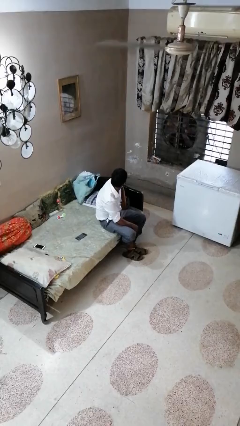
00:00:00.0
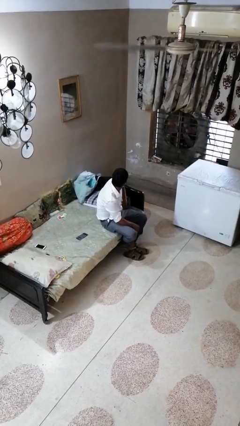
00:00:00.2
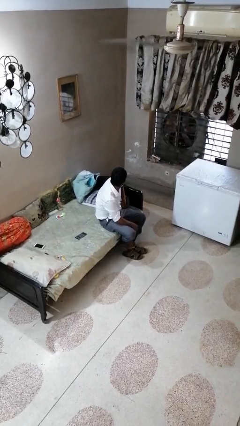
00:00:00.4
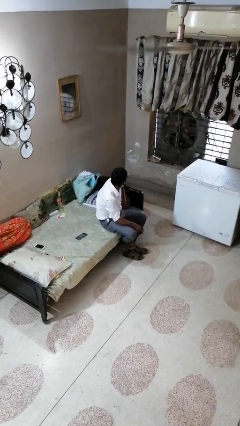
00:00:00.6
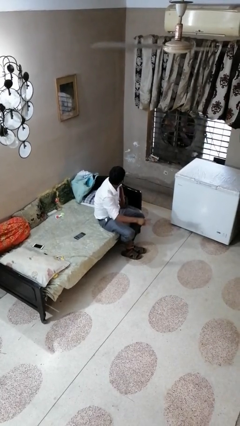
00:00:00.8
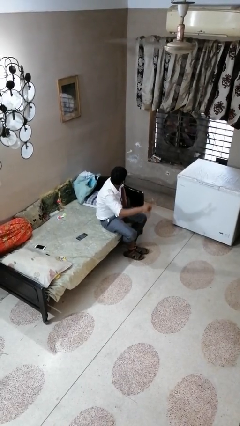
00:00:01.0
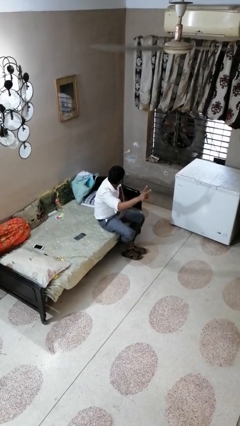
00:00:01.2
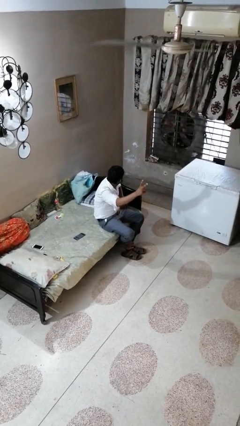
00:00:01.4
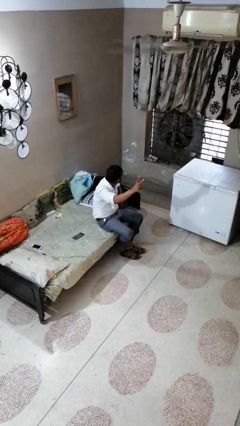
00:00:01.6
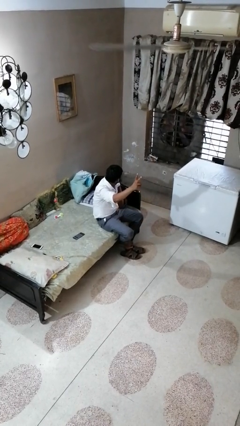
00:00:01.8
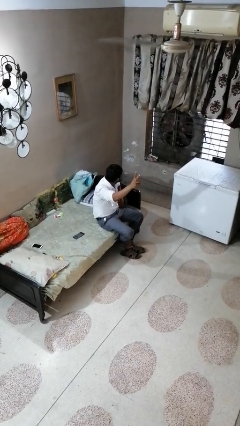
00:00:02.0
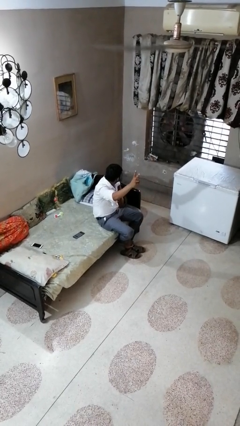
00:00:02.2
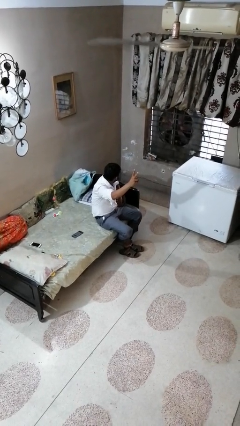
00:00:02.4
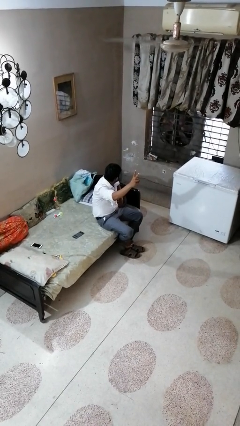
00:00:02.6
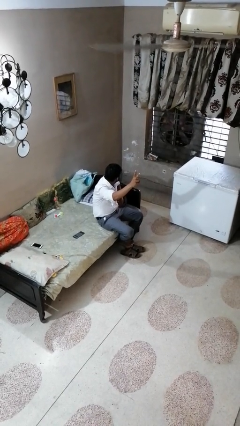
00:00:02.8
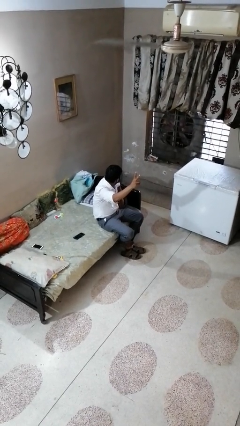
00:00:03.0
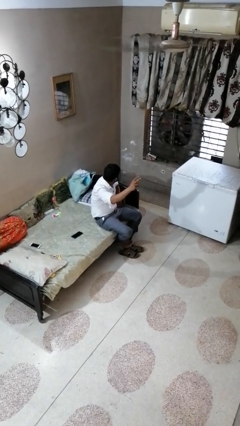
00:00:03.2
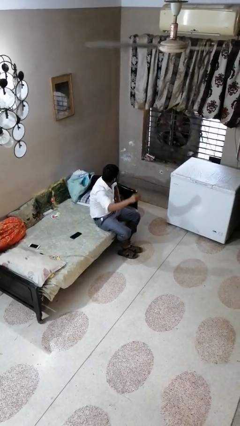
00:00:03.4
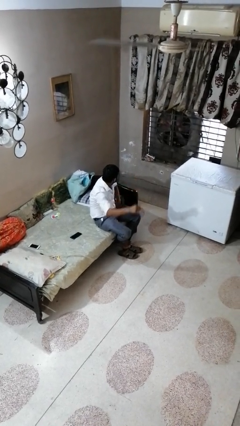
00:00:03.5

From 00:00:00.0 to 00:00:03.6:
person gestures peace

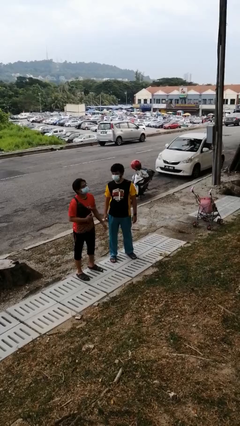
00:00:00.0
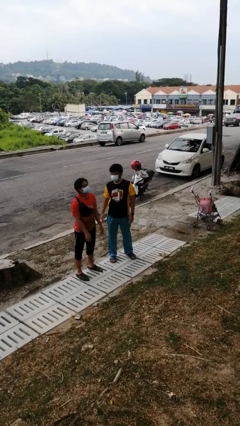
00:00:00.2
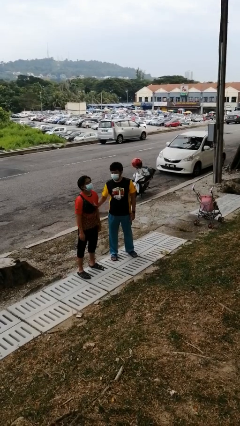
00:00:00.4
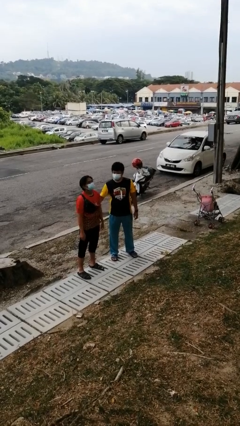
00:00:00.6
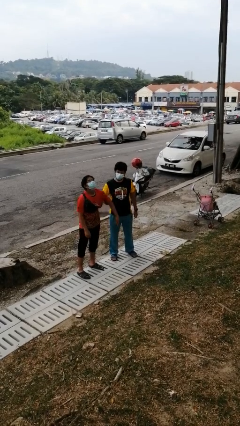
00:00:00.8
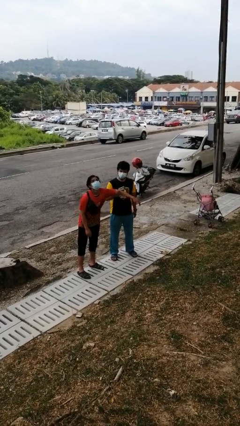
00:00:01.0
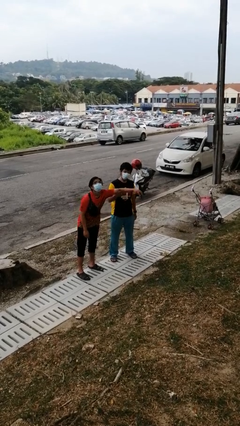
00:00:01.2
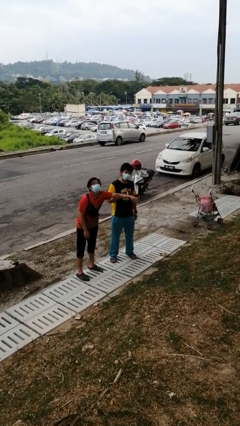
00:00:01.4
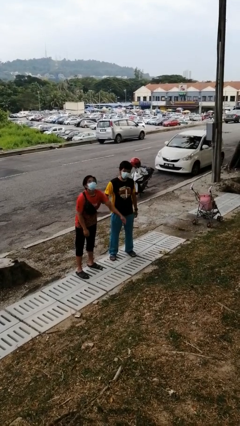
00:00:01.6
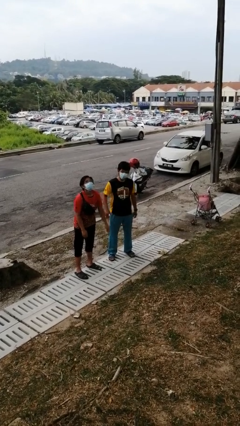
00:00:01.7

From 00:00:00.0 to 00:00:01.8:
person grabs person by bicep

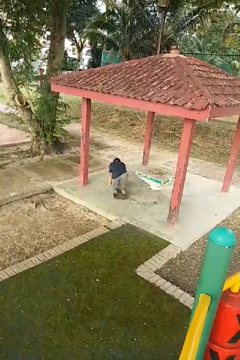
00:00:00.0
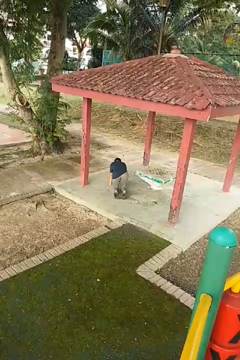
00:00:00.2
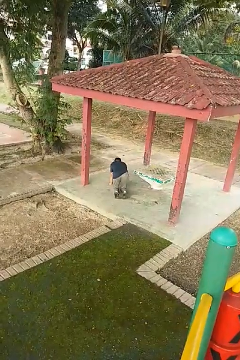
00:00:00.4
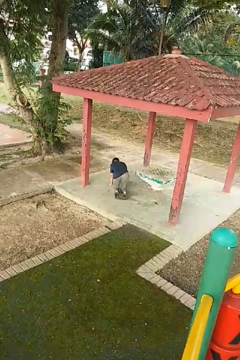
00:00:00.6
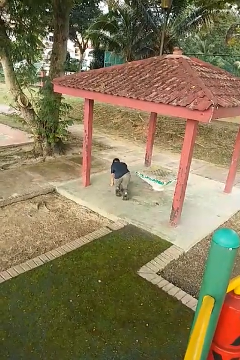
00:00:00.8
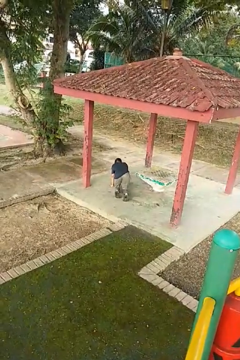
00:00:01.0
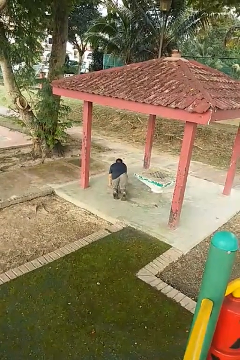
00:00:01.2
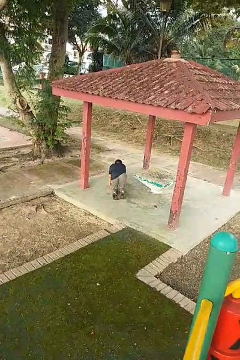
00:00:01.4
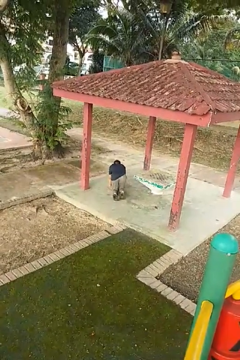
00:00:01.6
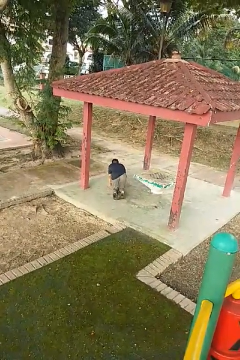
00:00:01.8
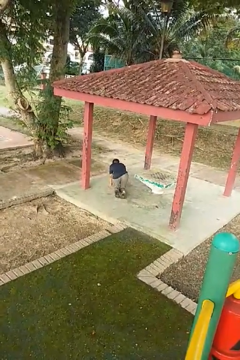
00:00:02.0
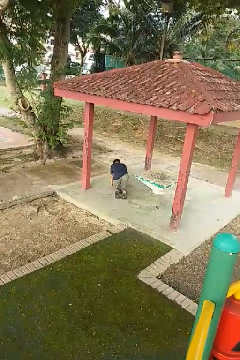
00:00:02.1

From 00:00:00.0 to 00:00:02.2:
person crawls

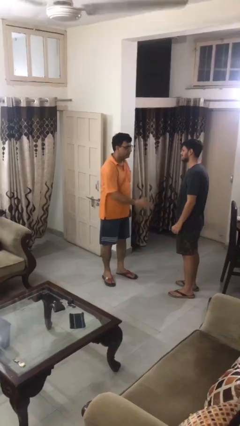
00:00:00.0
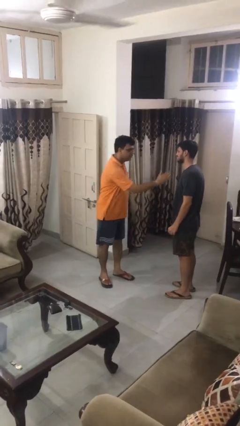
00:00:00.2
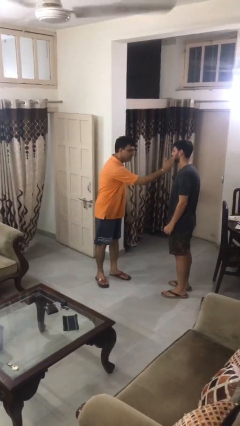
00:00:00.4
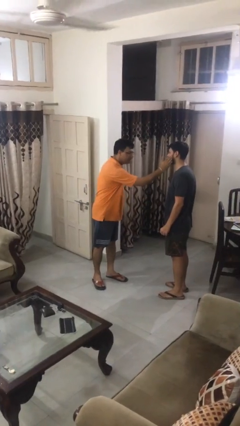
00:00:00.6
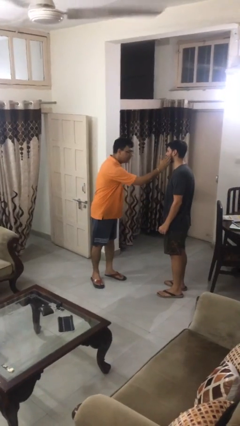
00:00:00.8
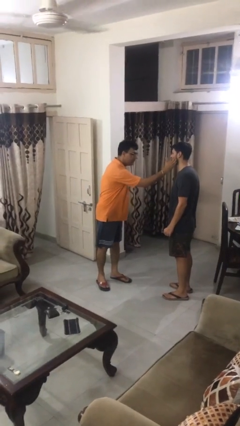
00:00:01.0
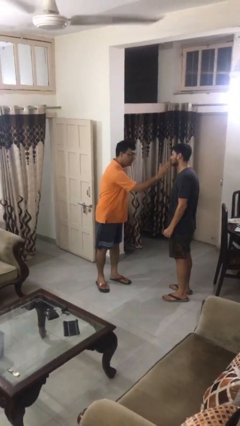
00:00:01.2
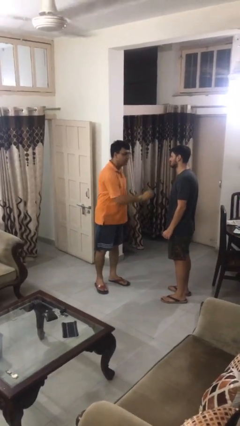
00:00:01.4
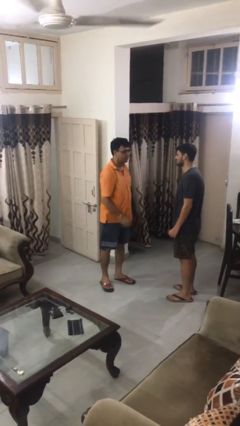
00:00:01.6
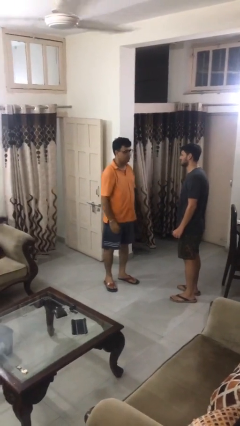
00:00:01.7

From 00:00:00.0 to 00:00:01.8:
person touches face of person

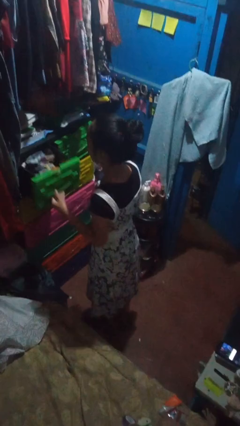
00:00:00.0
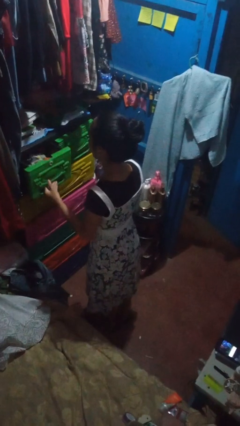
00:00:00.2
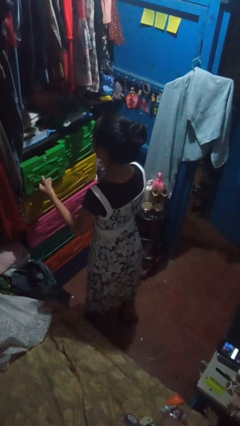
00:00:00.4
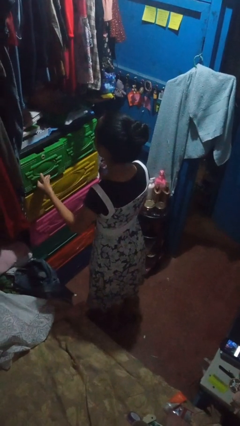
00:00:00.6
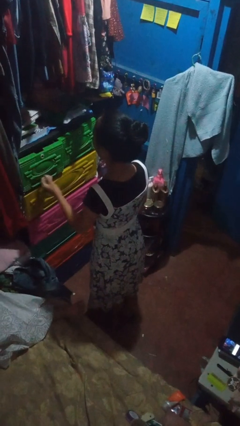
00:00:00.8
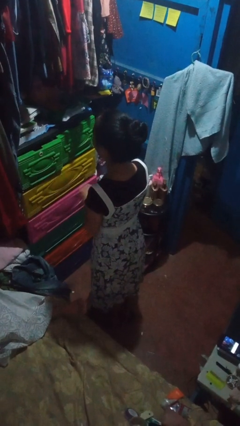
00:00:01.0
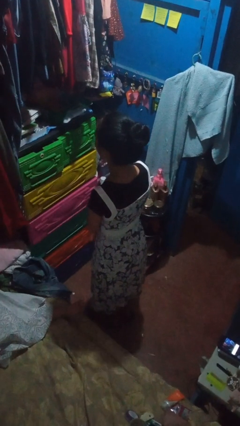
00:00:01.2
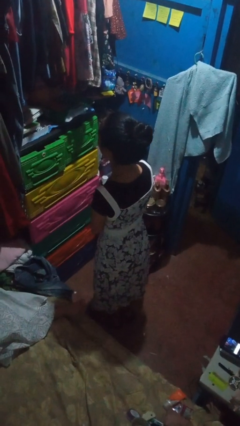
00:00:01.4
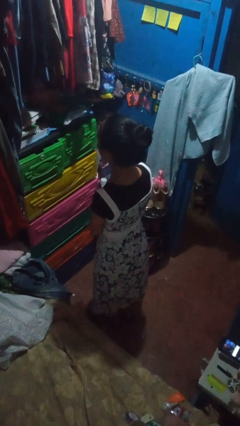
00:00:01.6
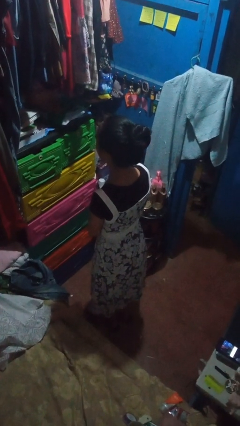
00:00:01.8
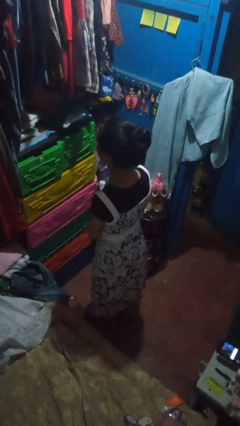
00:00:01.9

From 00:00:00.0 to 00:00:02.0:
person closes dresser drawer

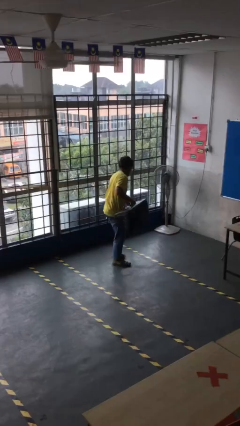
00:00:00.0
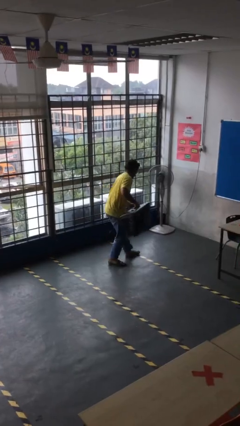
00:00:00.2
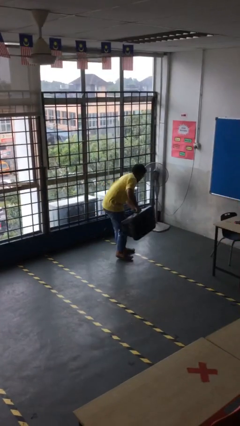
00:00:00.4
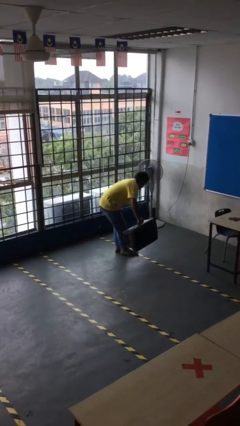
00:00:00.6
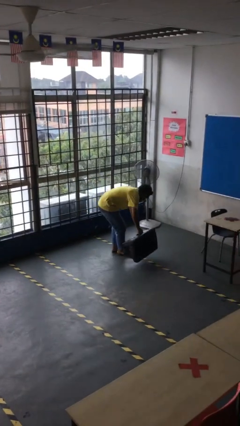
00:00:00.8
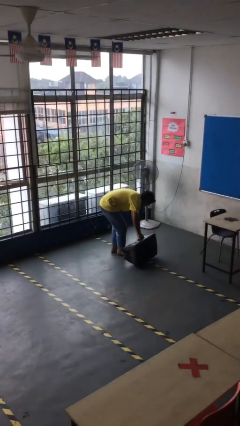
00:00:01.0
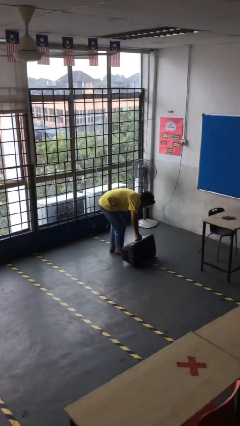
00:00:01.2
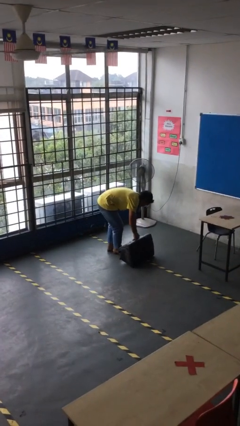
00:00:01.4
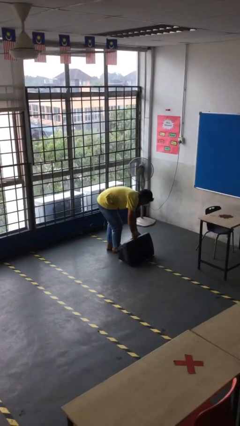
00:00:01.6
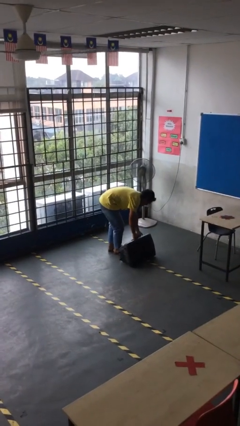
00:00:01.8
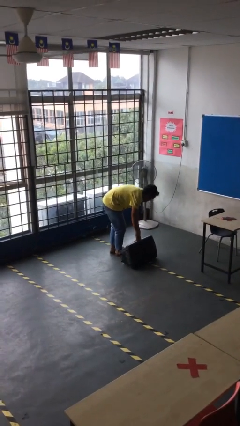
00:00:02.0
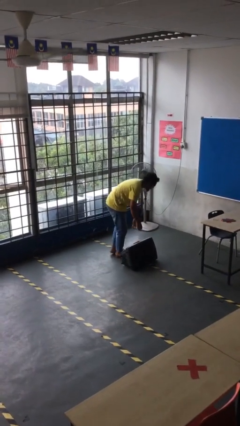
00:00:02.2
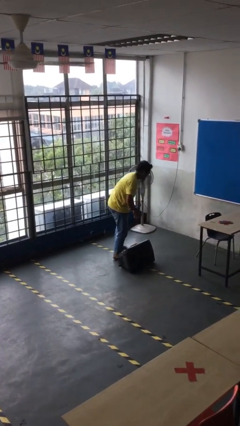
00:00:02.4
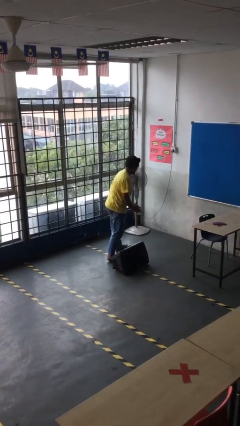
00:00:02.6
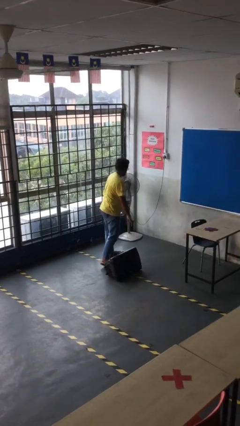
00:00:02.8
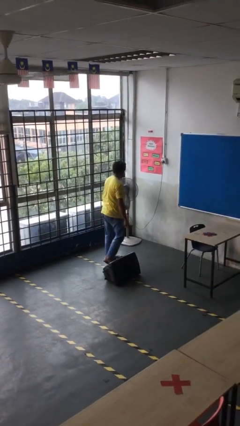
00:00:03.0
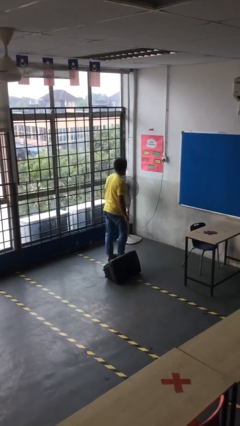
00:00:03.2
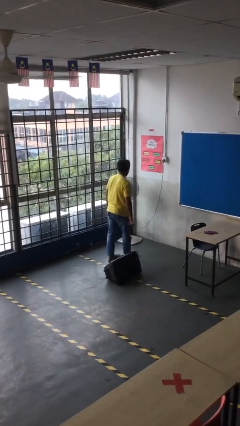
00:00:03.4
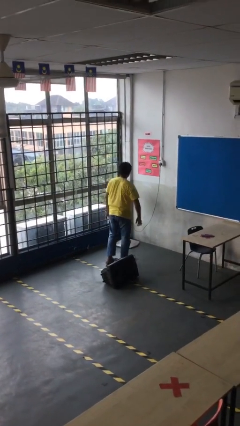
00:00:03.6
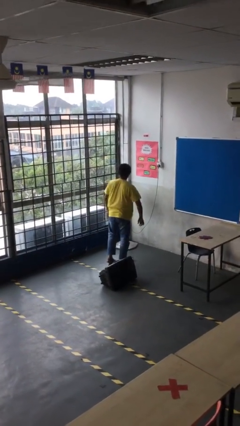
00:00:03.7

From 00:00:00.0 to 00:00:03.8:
person puts down object on floor

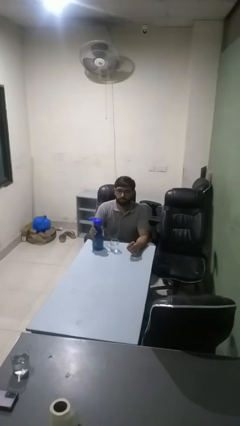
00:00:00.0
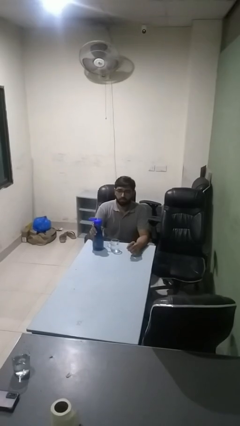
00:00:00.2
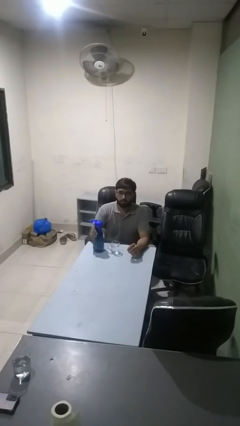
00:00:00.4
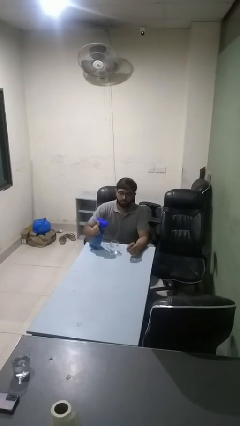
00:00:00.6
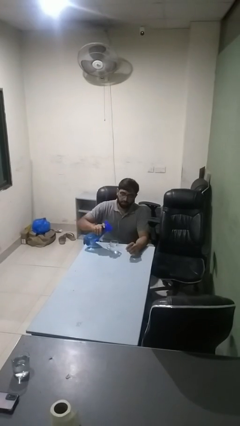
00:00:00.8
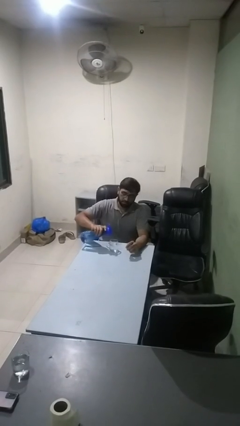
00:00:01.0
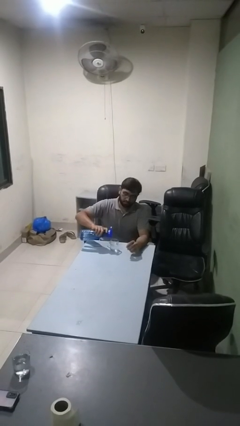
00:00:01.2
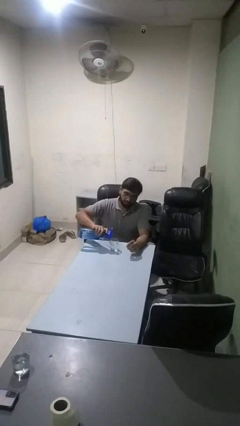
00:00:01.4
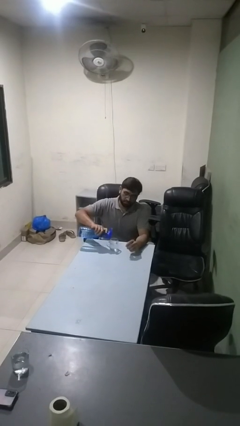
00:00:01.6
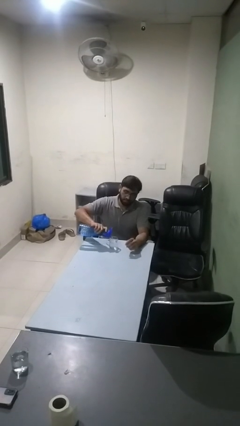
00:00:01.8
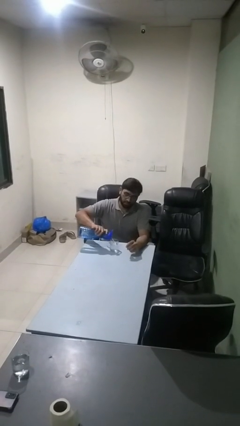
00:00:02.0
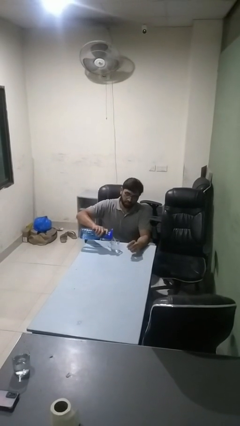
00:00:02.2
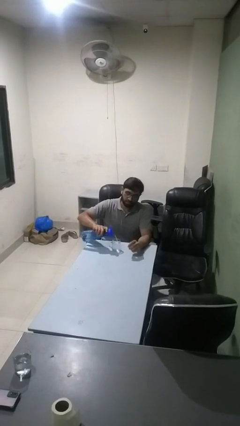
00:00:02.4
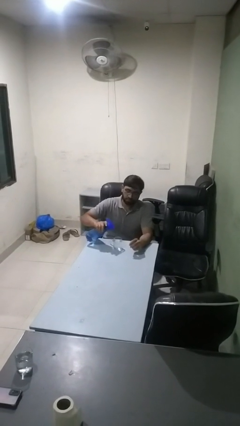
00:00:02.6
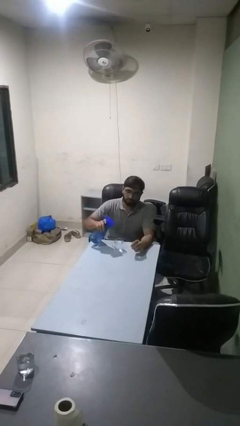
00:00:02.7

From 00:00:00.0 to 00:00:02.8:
person pours liquid into cup
